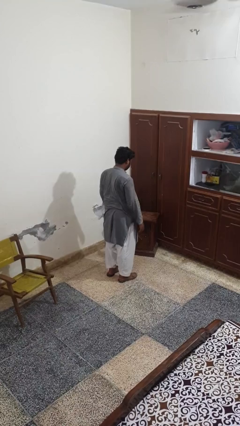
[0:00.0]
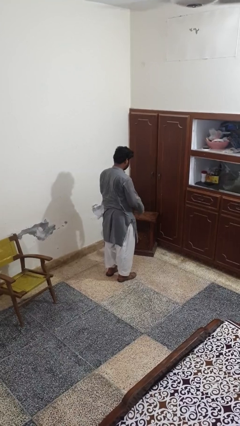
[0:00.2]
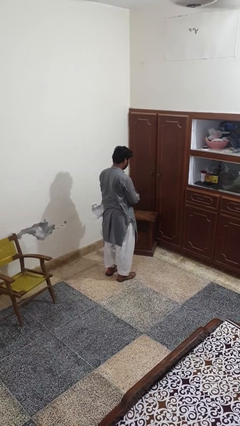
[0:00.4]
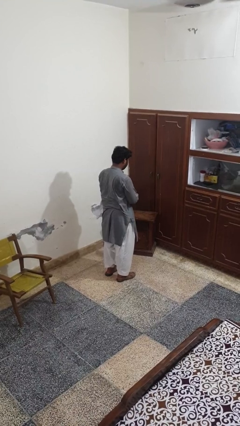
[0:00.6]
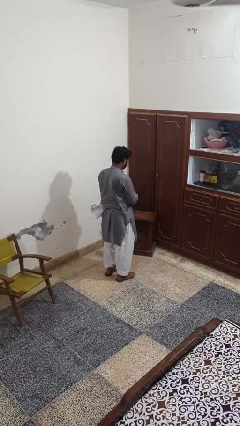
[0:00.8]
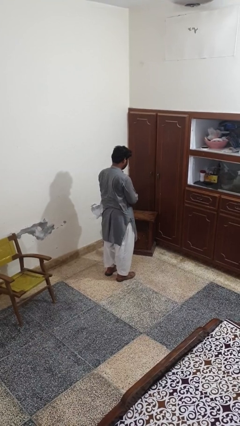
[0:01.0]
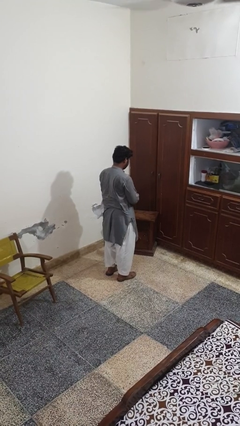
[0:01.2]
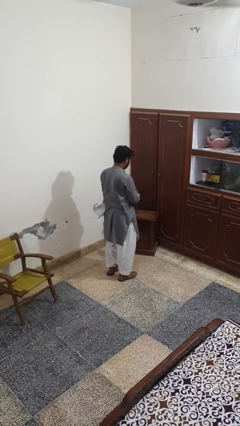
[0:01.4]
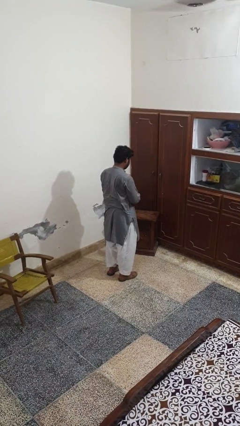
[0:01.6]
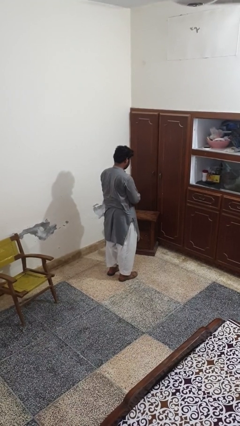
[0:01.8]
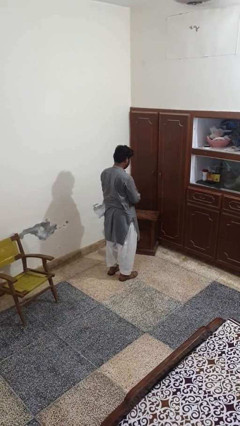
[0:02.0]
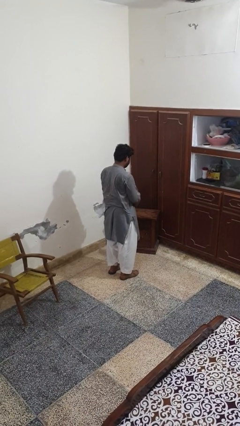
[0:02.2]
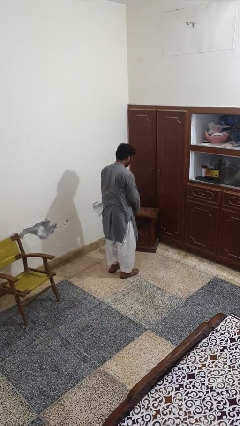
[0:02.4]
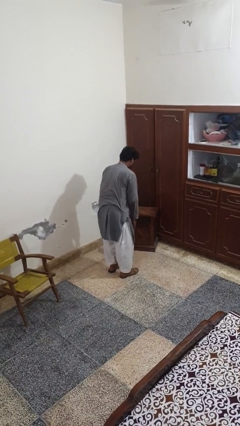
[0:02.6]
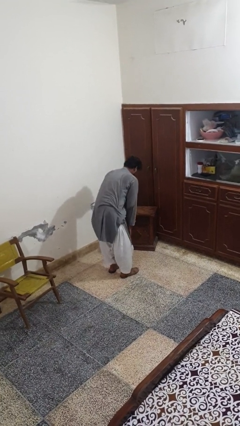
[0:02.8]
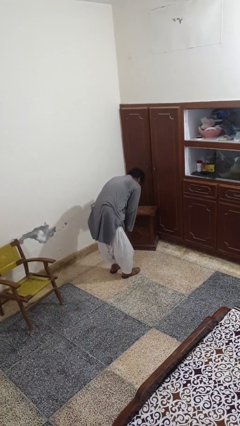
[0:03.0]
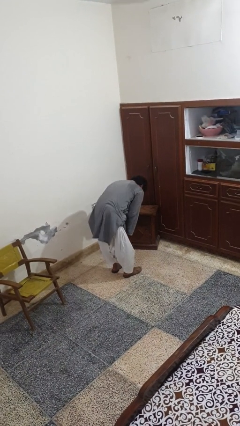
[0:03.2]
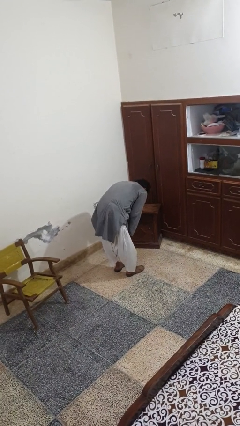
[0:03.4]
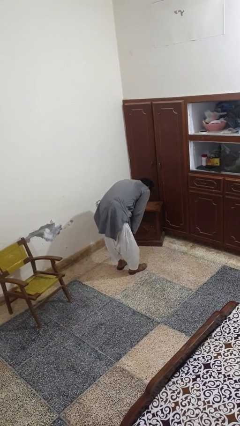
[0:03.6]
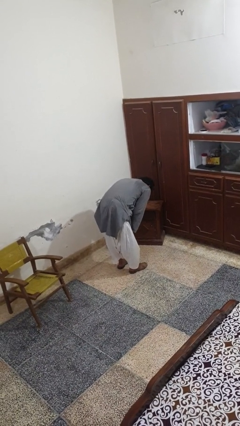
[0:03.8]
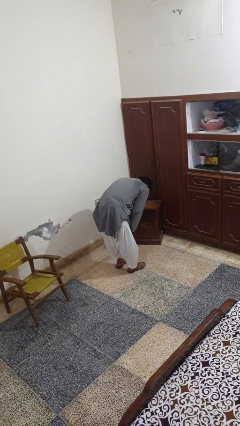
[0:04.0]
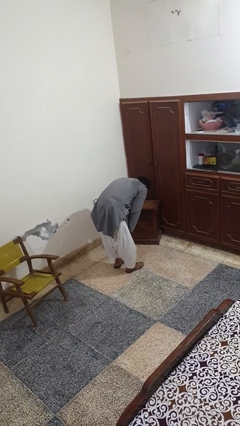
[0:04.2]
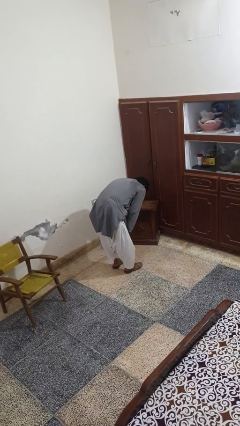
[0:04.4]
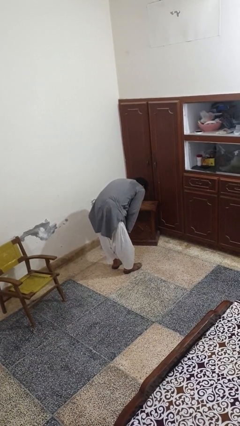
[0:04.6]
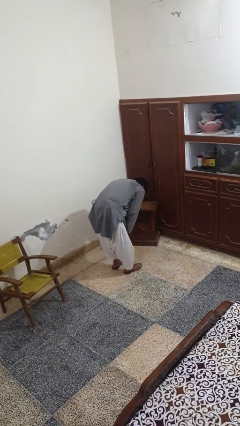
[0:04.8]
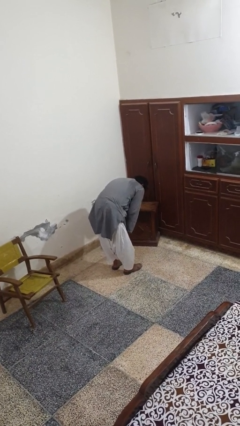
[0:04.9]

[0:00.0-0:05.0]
person prays

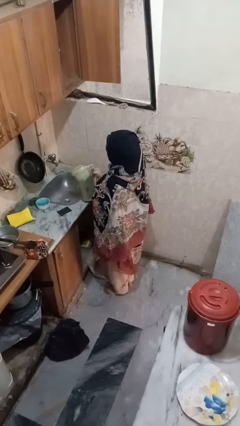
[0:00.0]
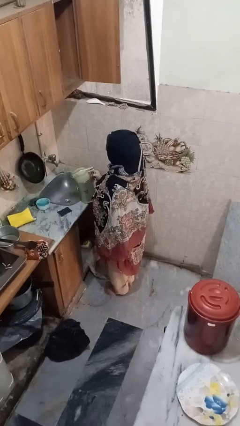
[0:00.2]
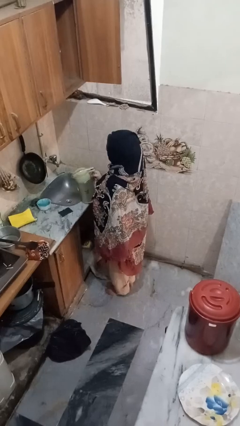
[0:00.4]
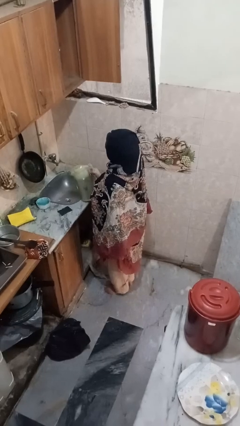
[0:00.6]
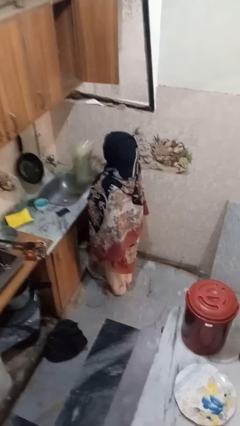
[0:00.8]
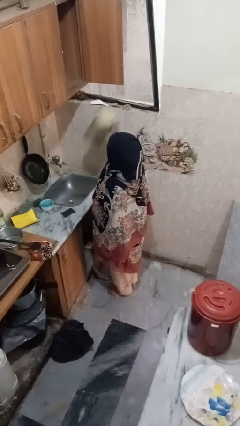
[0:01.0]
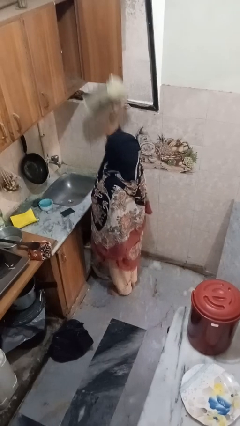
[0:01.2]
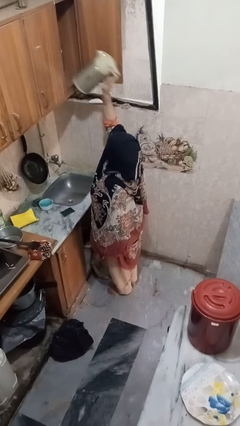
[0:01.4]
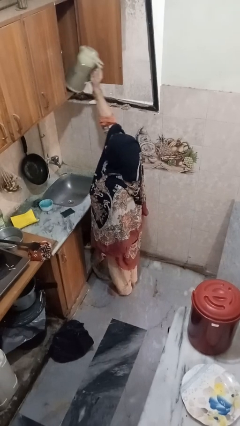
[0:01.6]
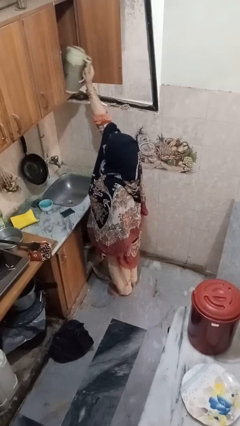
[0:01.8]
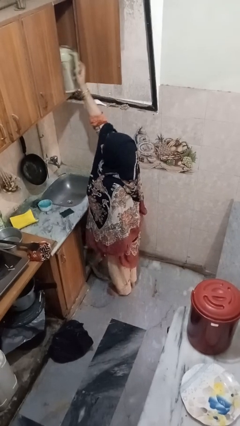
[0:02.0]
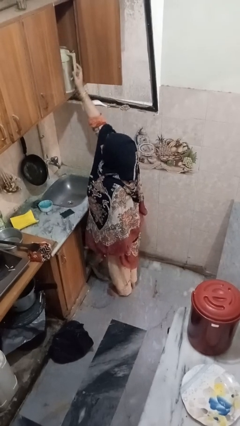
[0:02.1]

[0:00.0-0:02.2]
person takes object from cabinet

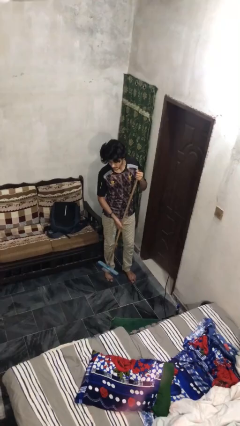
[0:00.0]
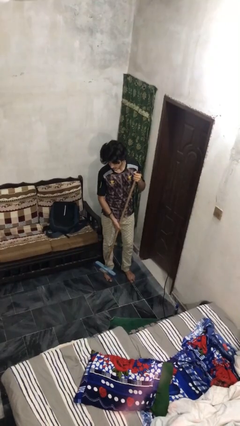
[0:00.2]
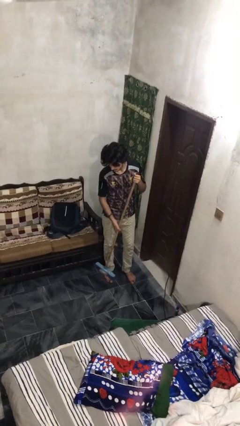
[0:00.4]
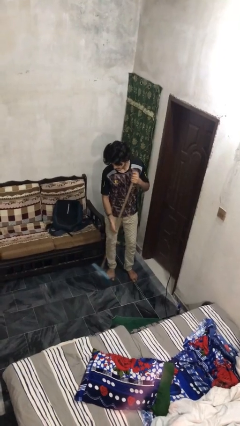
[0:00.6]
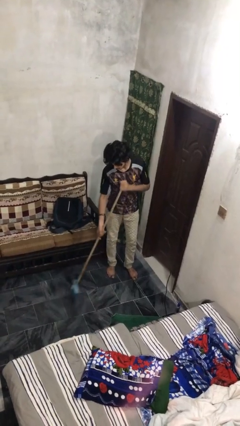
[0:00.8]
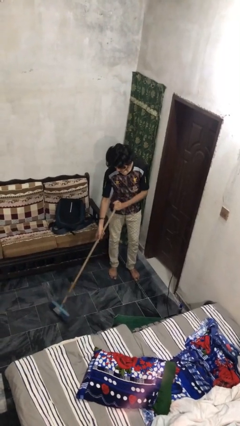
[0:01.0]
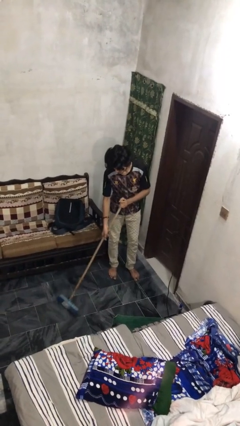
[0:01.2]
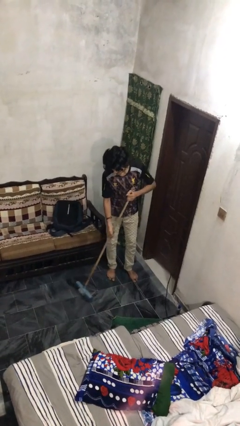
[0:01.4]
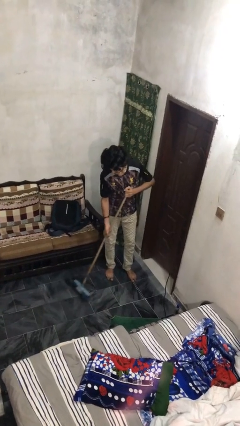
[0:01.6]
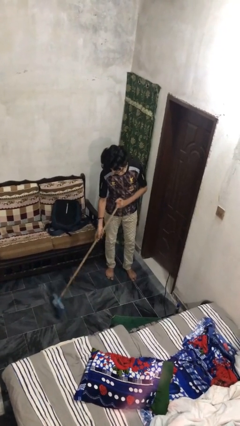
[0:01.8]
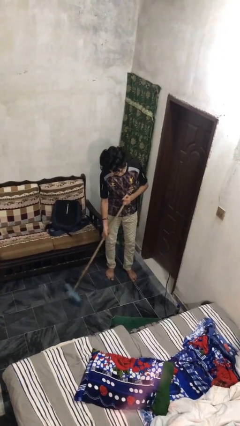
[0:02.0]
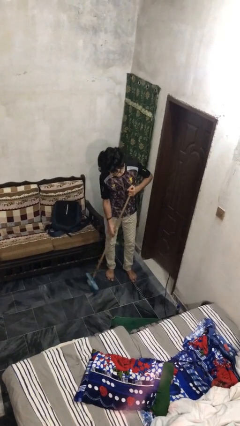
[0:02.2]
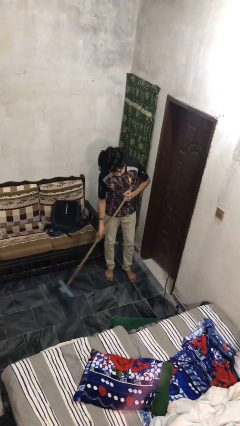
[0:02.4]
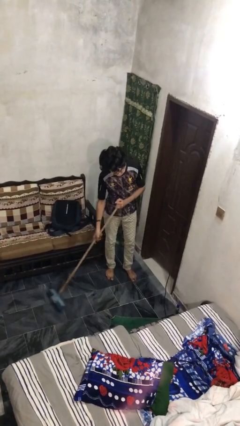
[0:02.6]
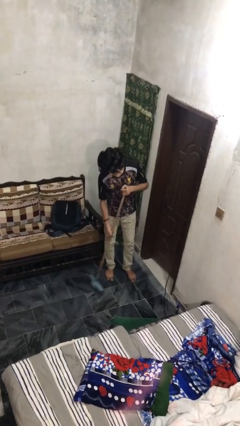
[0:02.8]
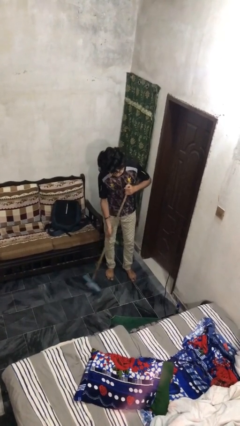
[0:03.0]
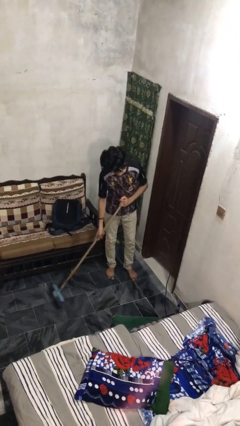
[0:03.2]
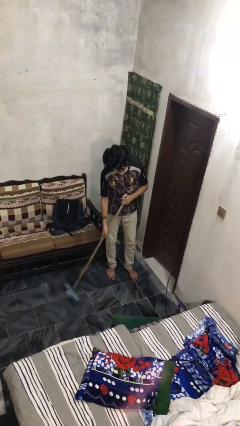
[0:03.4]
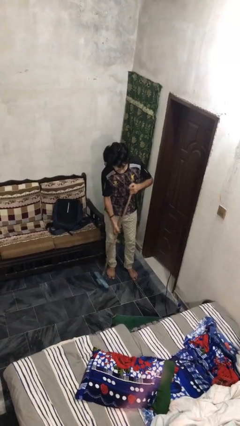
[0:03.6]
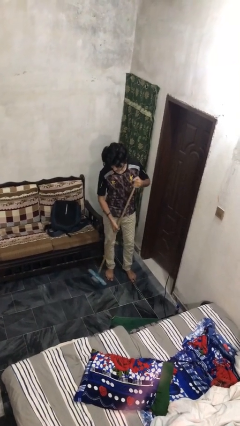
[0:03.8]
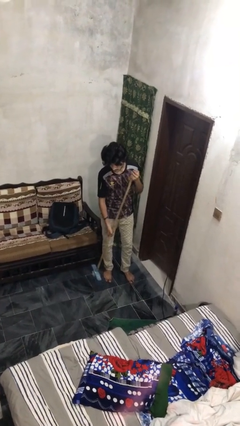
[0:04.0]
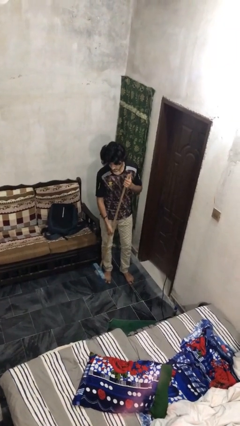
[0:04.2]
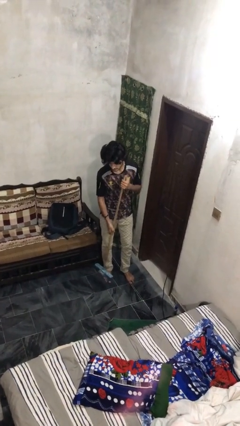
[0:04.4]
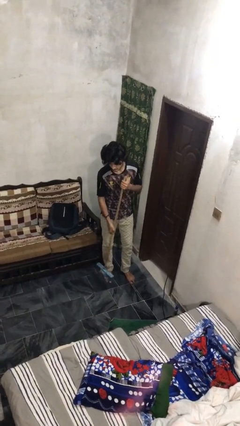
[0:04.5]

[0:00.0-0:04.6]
person sweeps floor

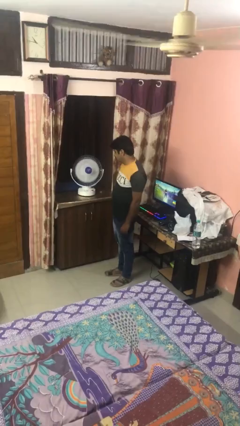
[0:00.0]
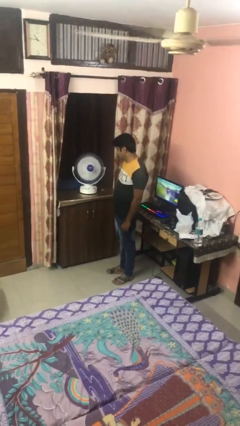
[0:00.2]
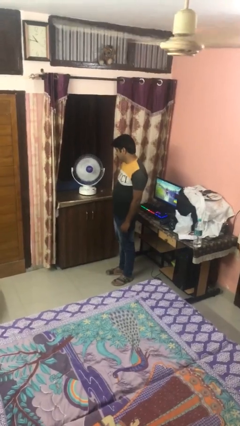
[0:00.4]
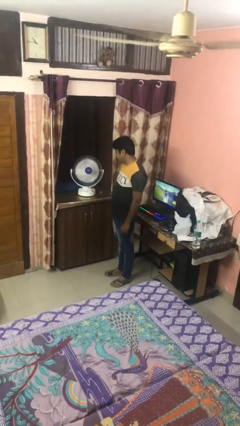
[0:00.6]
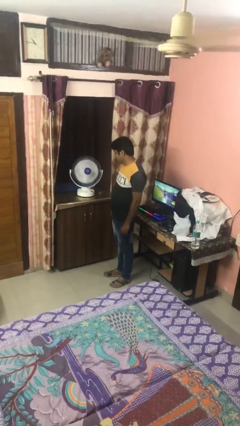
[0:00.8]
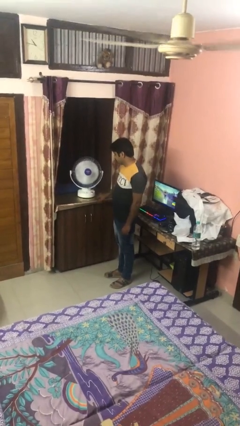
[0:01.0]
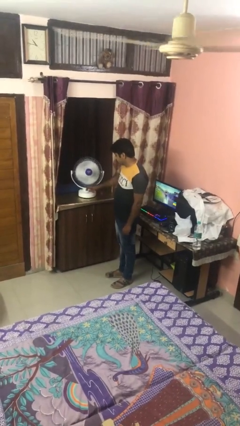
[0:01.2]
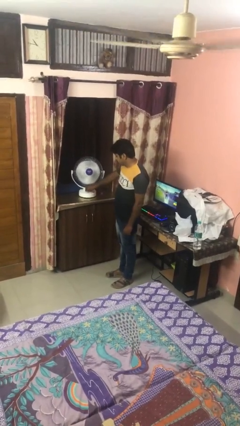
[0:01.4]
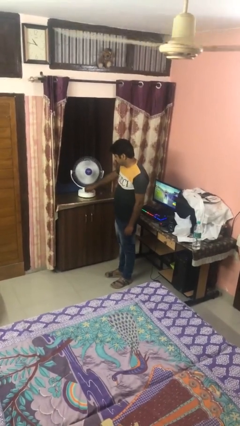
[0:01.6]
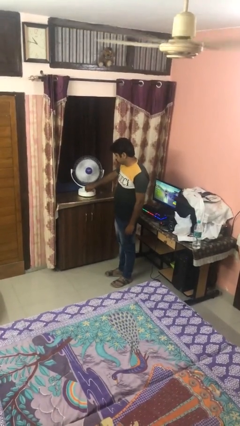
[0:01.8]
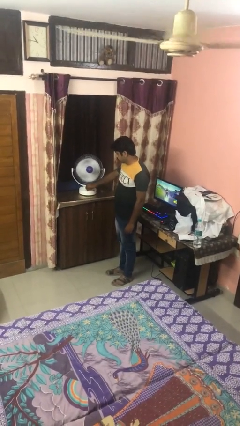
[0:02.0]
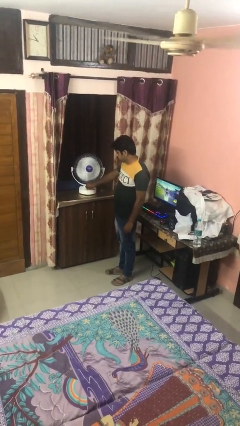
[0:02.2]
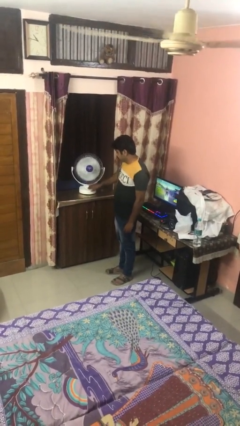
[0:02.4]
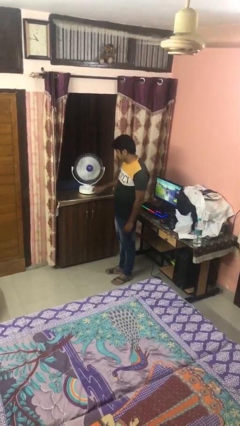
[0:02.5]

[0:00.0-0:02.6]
person turns on fan

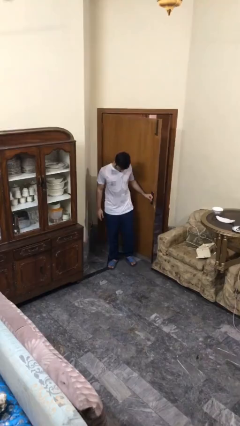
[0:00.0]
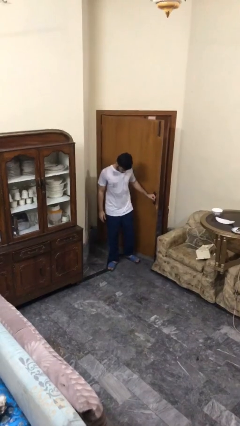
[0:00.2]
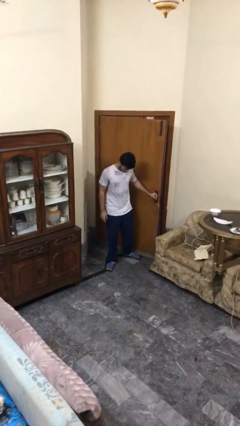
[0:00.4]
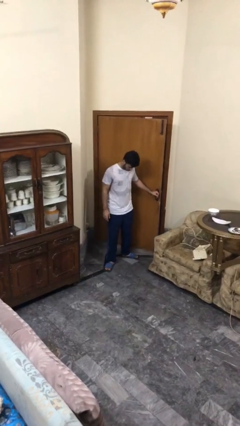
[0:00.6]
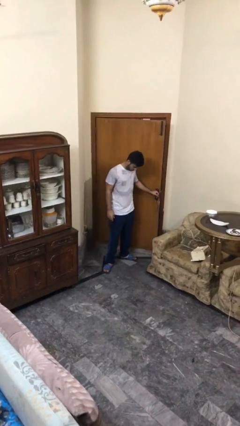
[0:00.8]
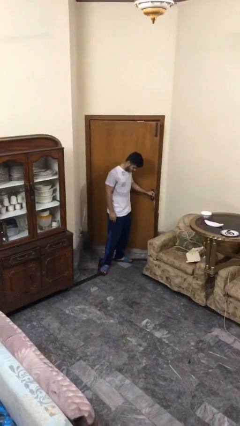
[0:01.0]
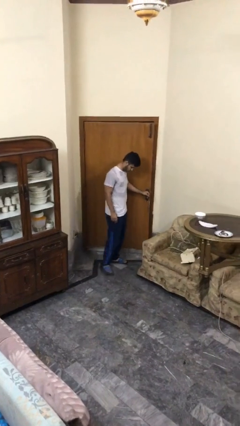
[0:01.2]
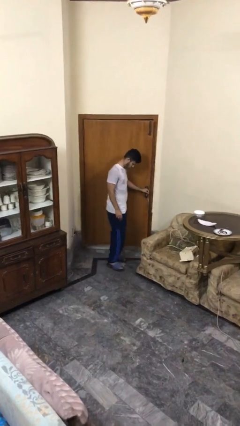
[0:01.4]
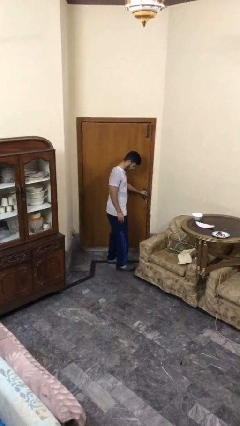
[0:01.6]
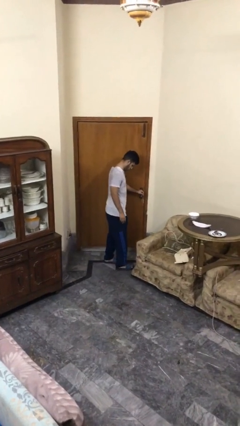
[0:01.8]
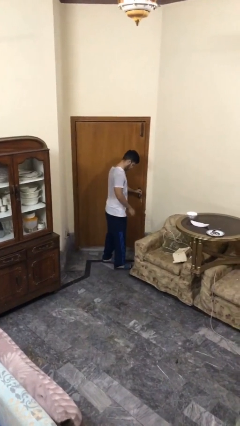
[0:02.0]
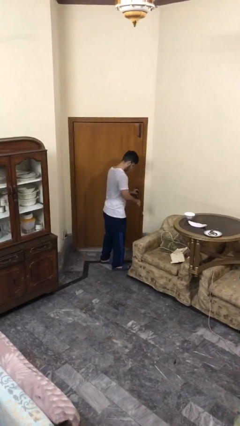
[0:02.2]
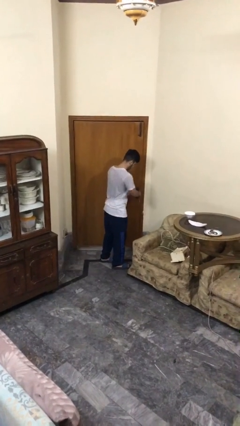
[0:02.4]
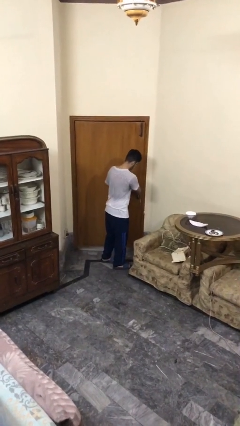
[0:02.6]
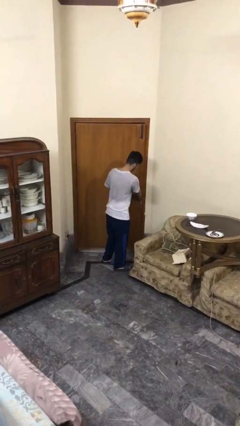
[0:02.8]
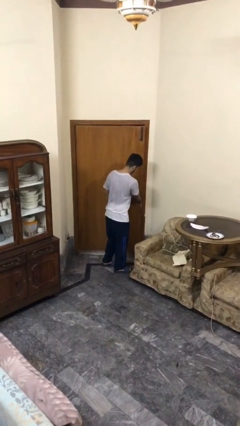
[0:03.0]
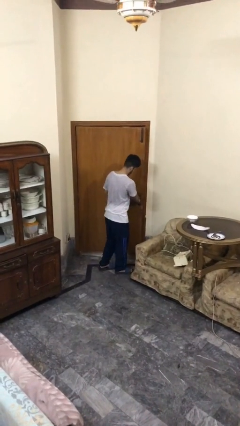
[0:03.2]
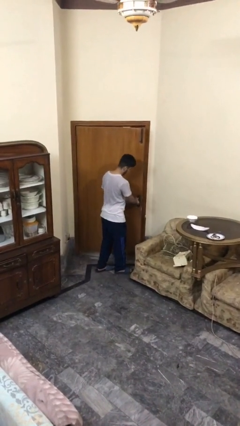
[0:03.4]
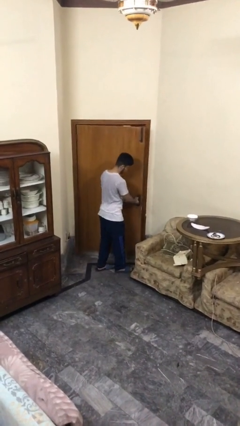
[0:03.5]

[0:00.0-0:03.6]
person closes facility door
